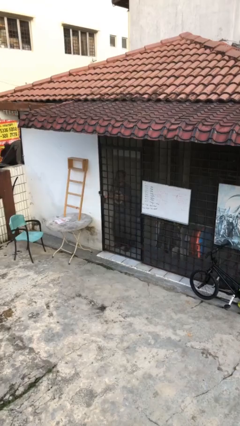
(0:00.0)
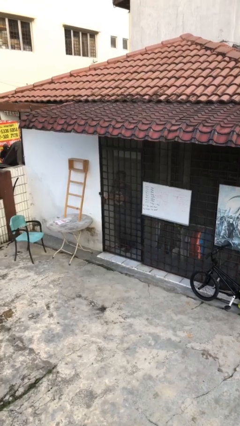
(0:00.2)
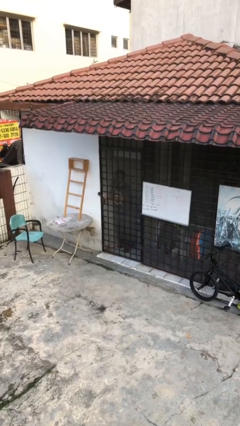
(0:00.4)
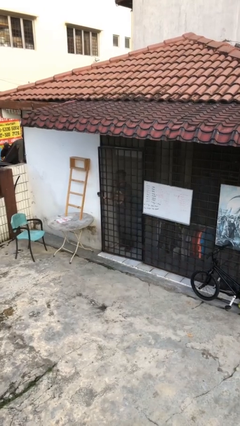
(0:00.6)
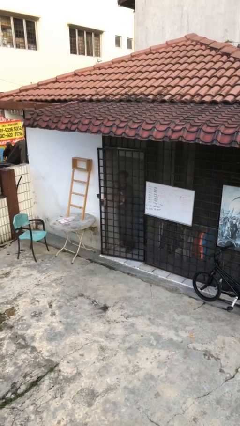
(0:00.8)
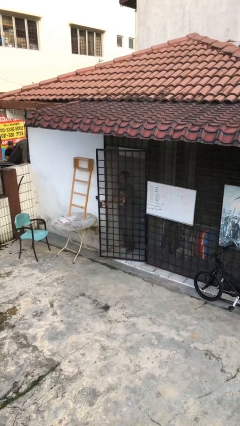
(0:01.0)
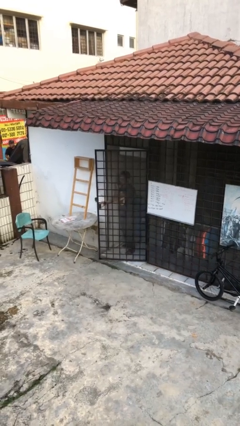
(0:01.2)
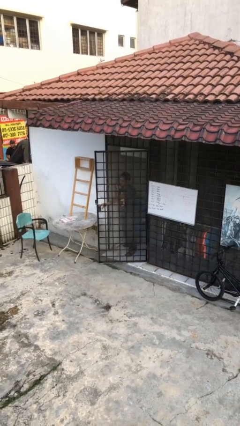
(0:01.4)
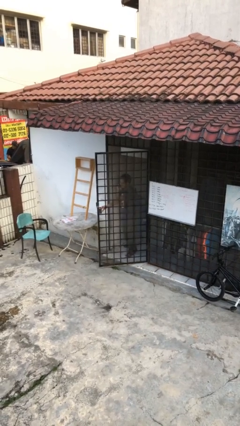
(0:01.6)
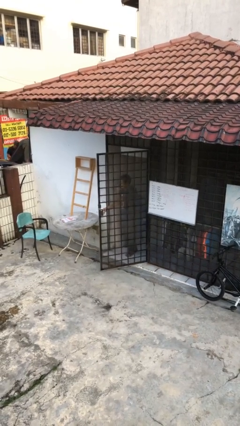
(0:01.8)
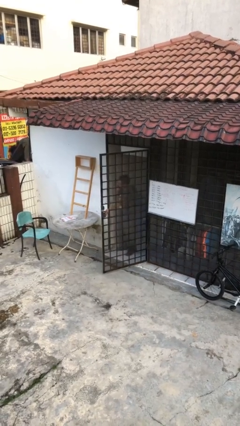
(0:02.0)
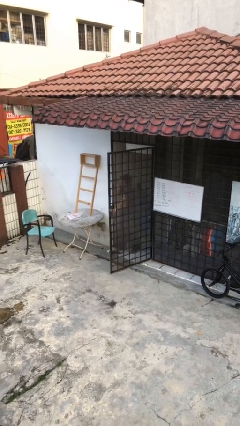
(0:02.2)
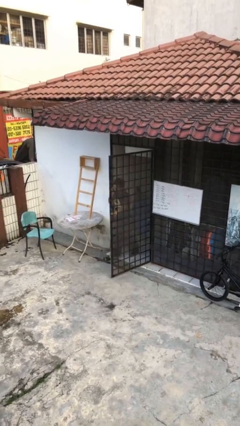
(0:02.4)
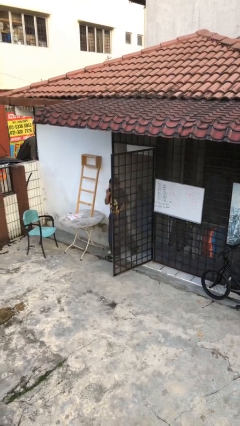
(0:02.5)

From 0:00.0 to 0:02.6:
person opens facility door

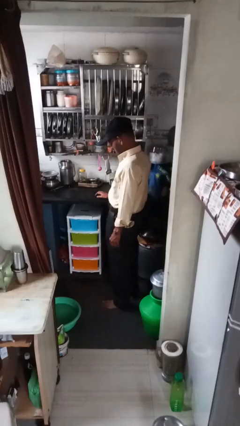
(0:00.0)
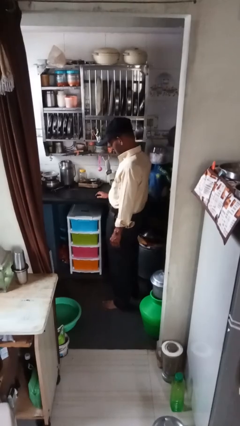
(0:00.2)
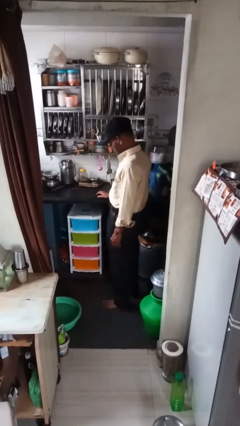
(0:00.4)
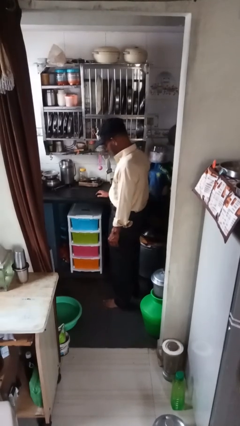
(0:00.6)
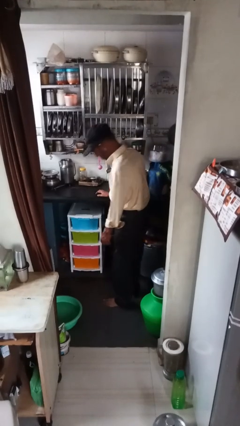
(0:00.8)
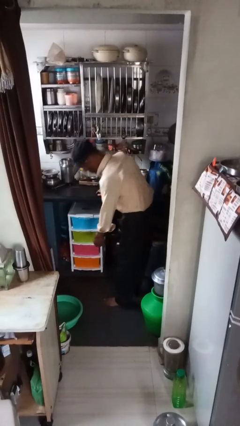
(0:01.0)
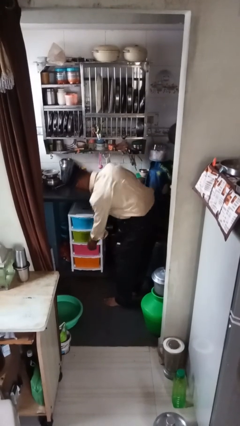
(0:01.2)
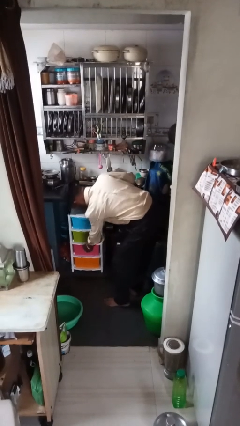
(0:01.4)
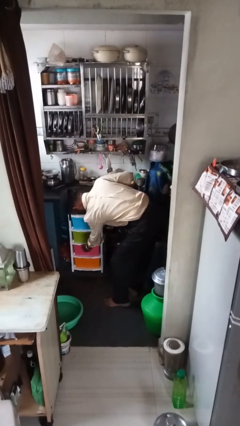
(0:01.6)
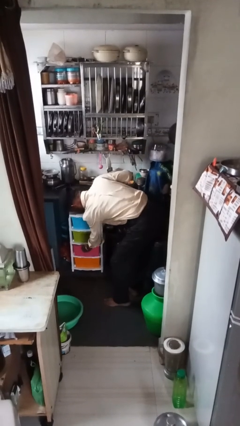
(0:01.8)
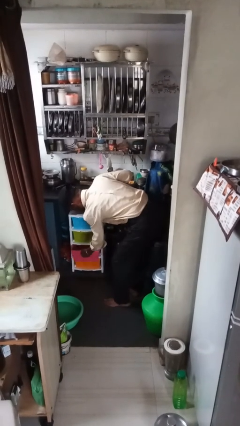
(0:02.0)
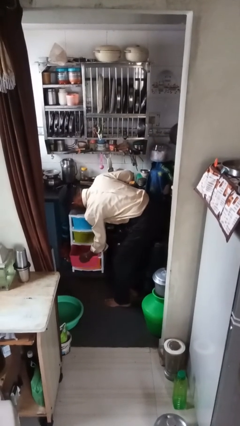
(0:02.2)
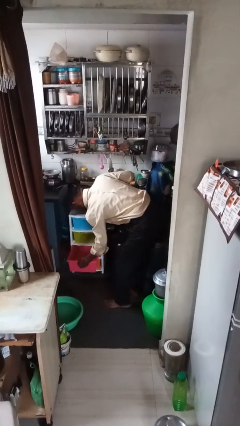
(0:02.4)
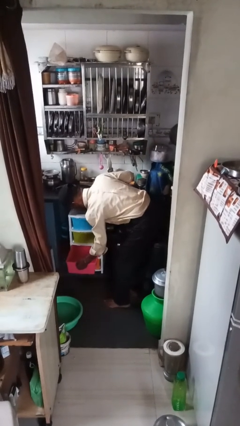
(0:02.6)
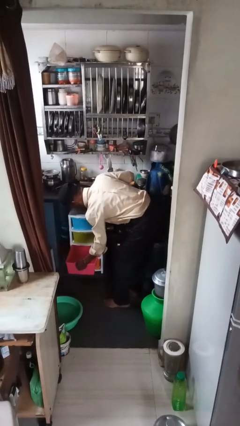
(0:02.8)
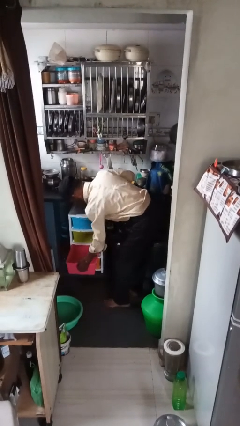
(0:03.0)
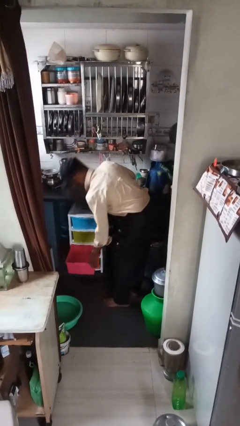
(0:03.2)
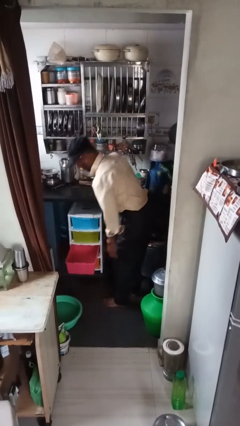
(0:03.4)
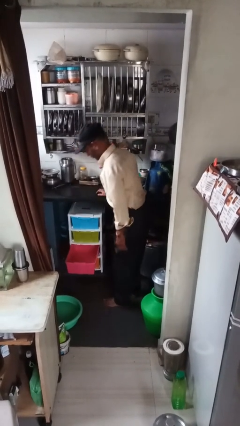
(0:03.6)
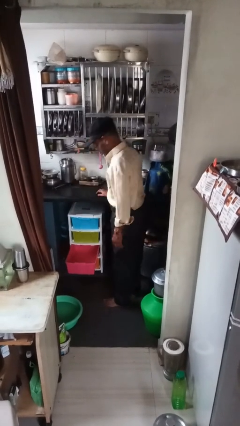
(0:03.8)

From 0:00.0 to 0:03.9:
person opens kitchen drawer

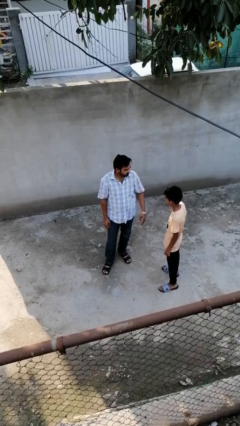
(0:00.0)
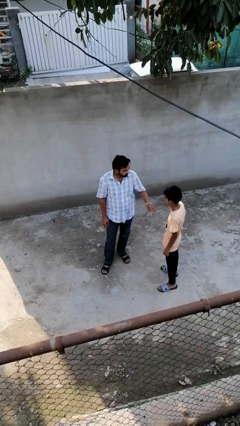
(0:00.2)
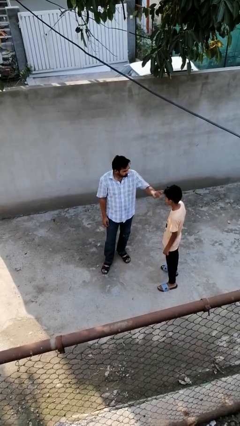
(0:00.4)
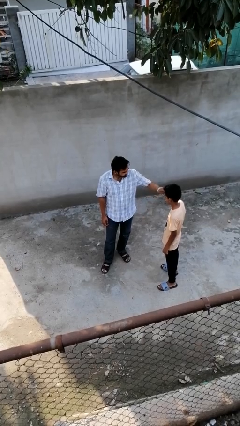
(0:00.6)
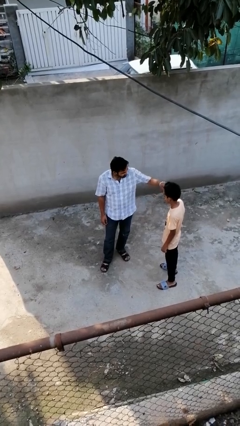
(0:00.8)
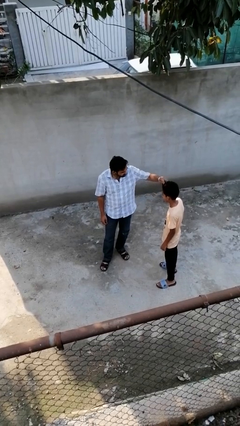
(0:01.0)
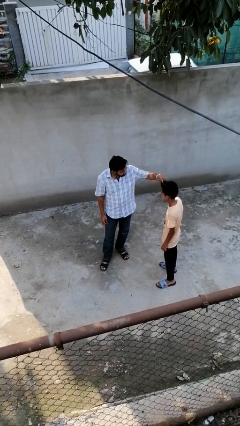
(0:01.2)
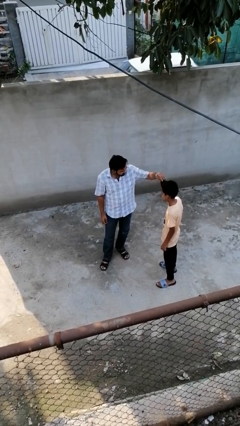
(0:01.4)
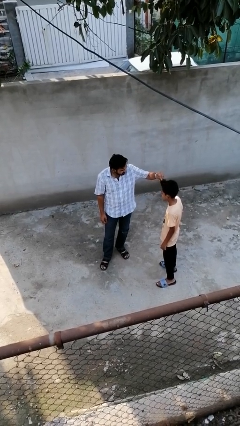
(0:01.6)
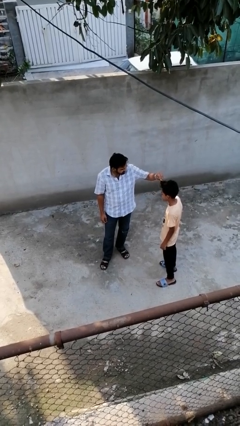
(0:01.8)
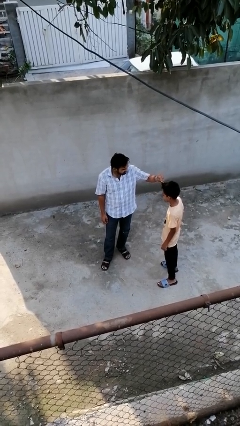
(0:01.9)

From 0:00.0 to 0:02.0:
person grabs person by hair

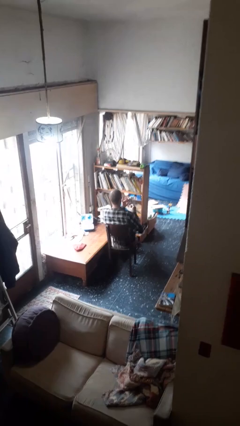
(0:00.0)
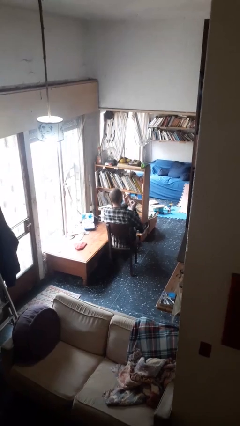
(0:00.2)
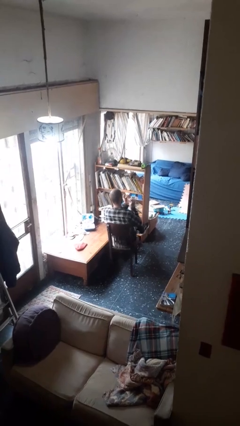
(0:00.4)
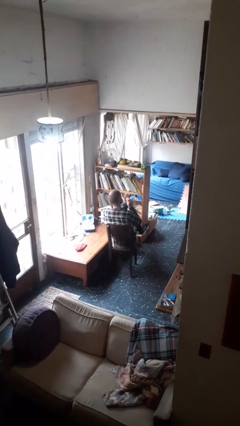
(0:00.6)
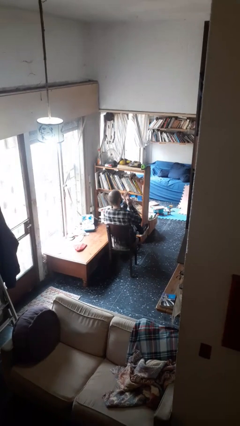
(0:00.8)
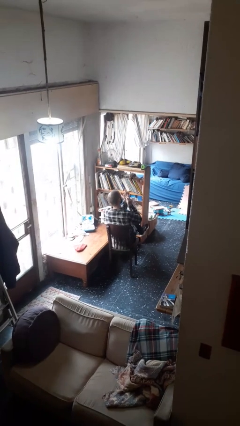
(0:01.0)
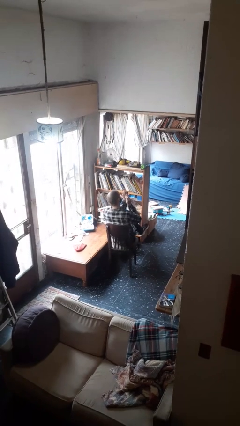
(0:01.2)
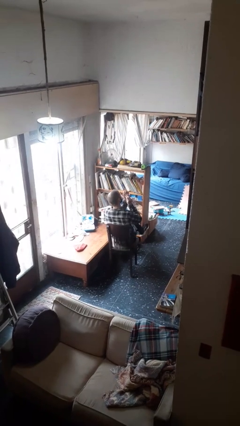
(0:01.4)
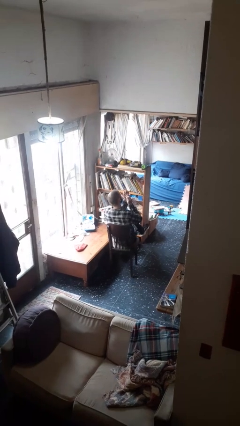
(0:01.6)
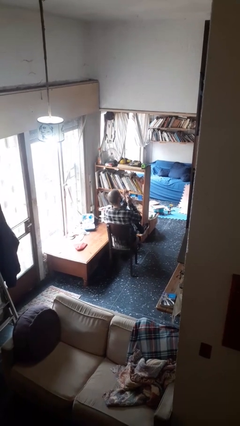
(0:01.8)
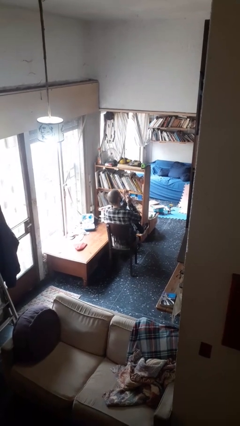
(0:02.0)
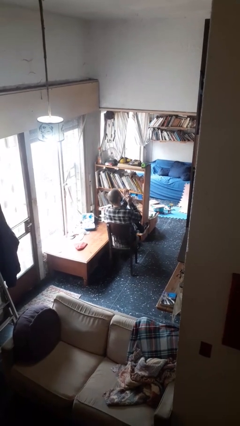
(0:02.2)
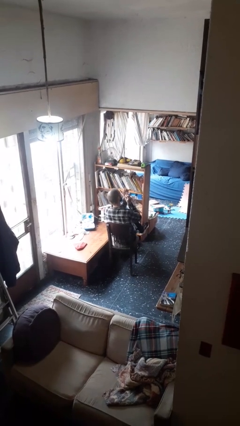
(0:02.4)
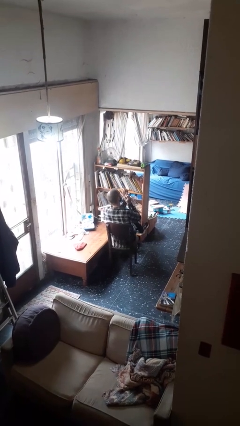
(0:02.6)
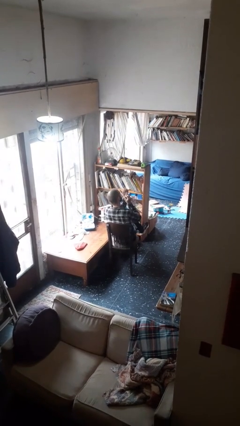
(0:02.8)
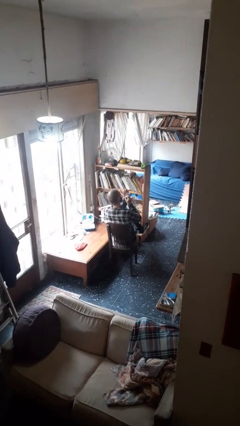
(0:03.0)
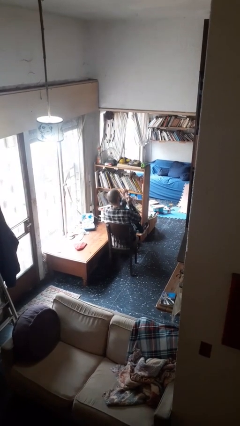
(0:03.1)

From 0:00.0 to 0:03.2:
person clips fingernails

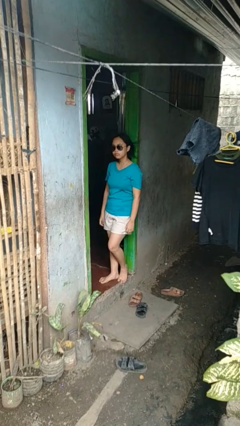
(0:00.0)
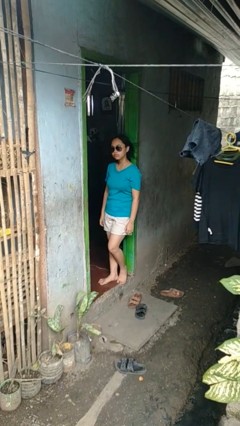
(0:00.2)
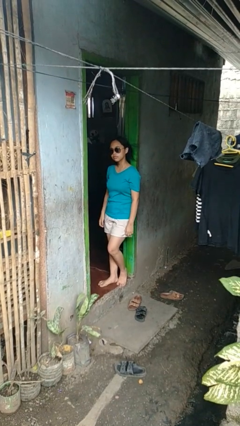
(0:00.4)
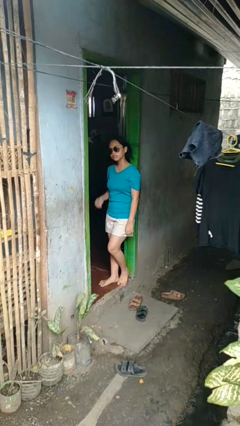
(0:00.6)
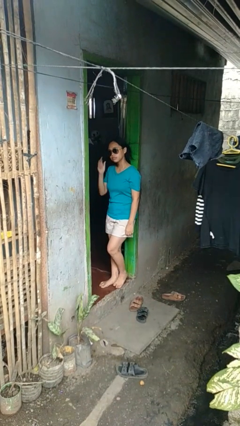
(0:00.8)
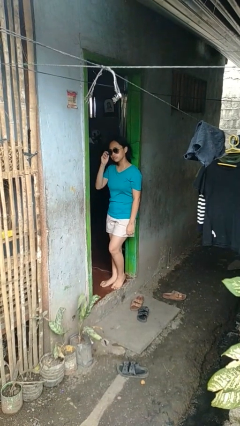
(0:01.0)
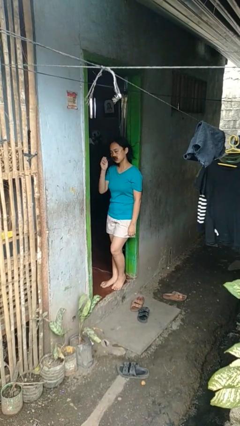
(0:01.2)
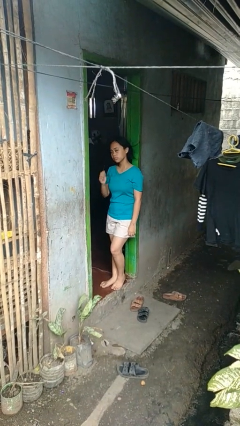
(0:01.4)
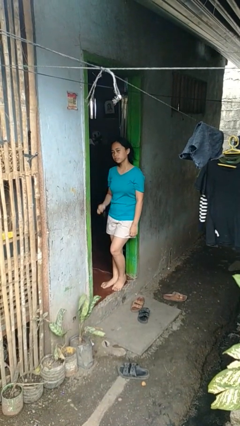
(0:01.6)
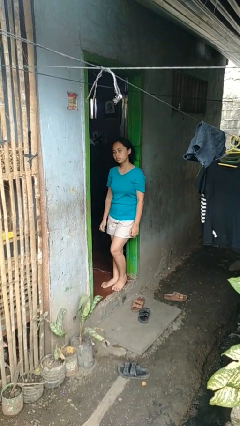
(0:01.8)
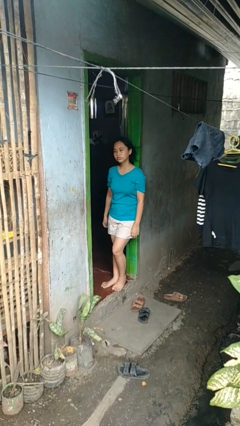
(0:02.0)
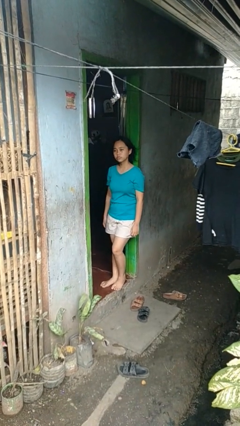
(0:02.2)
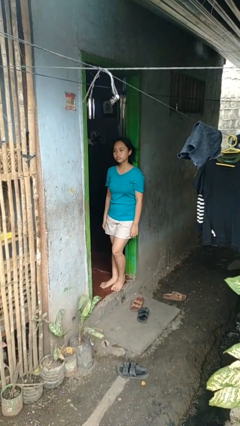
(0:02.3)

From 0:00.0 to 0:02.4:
person takes off sunglasses

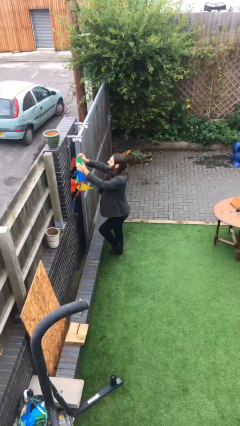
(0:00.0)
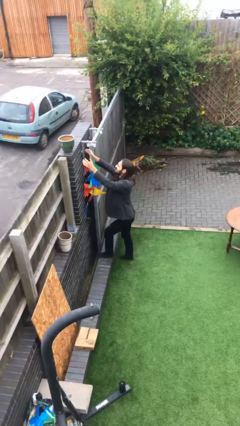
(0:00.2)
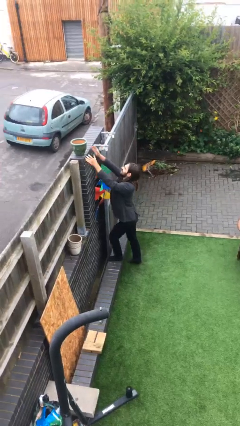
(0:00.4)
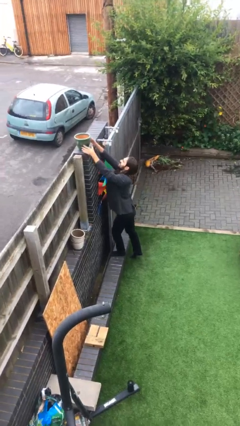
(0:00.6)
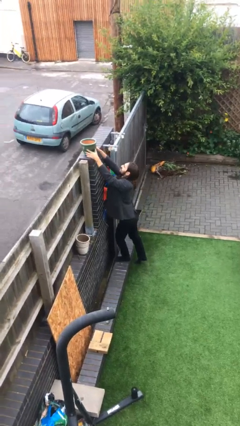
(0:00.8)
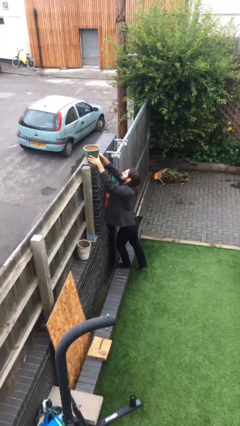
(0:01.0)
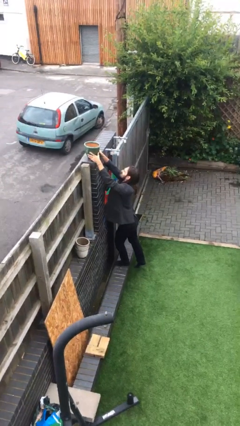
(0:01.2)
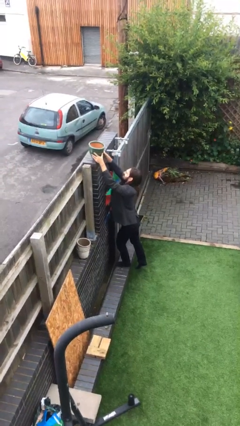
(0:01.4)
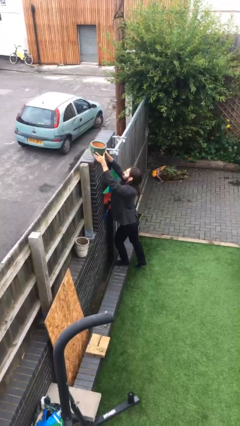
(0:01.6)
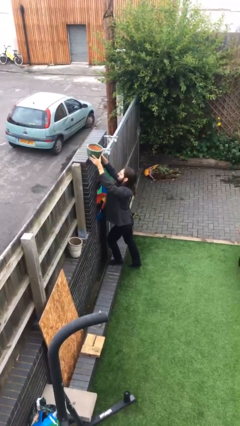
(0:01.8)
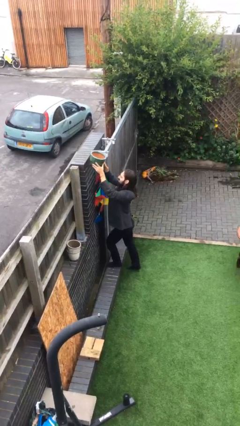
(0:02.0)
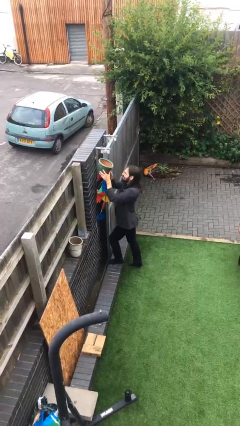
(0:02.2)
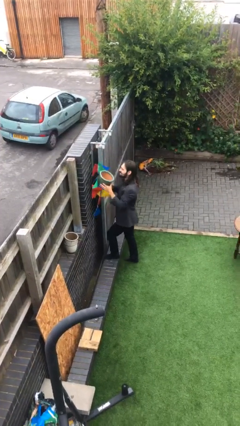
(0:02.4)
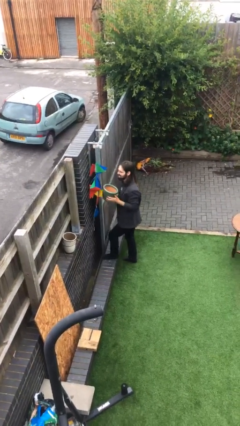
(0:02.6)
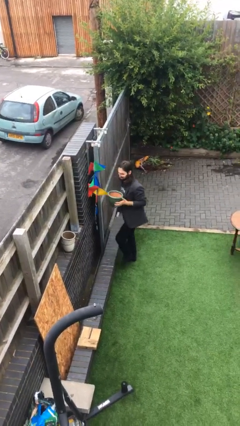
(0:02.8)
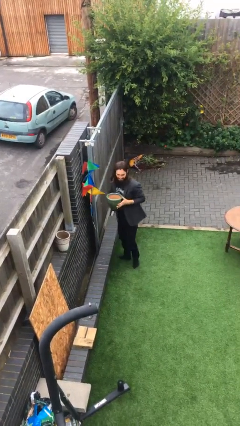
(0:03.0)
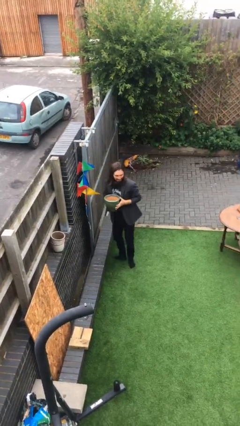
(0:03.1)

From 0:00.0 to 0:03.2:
person picks up object from shelf
